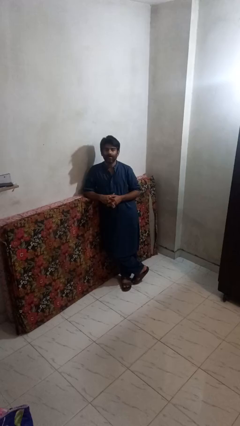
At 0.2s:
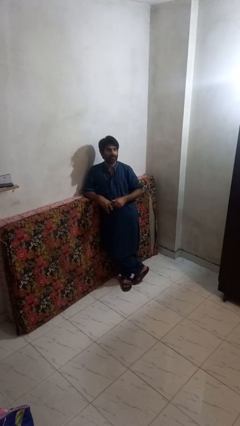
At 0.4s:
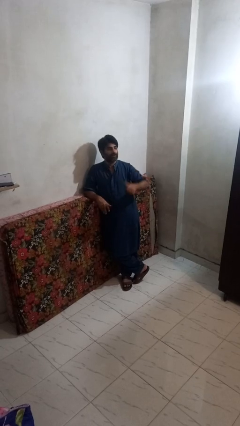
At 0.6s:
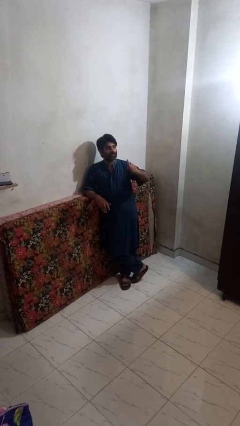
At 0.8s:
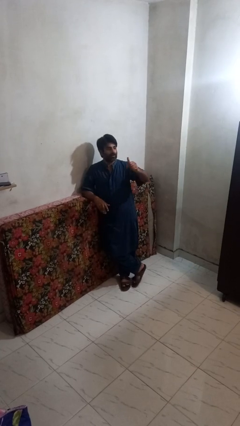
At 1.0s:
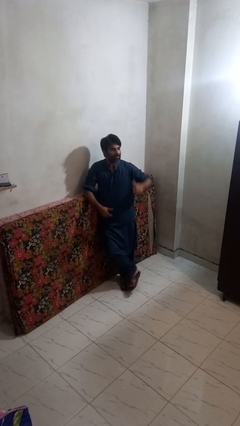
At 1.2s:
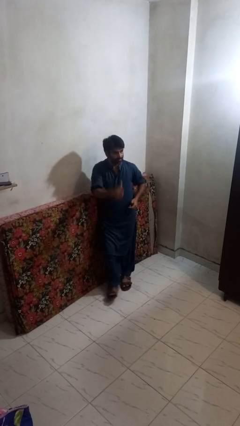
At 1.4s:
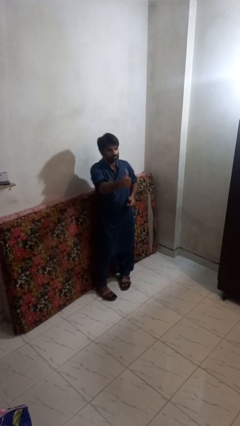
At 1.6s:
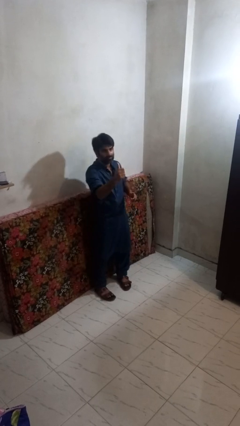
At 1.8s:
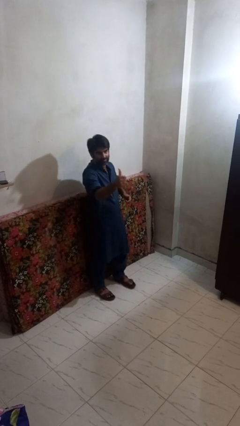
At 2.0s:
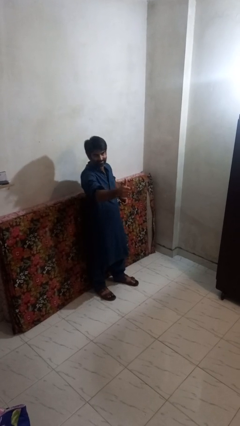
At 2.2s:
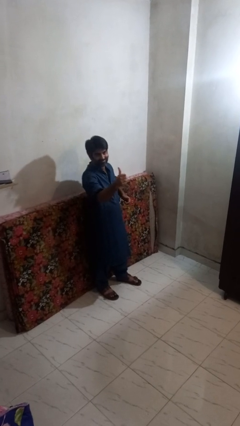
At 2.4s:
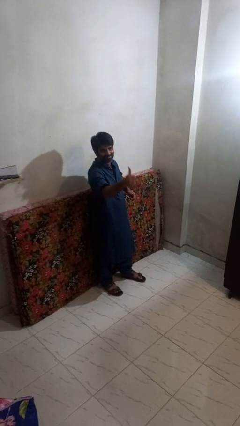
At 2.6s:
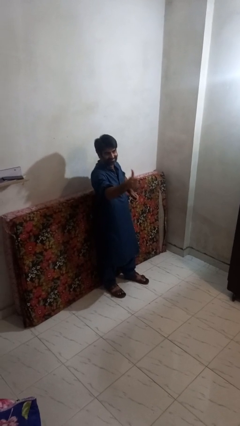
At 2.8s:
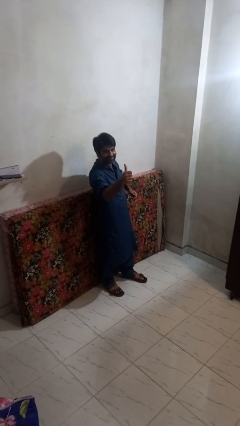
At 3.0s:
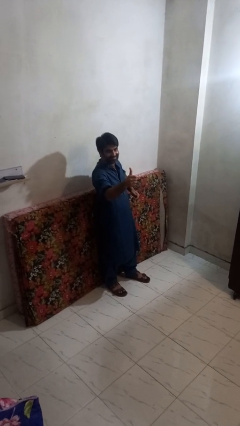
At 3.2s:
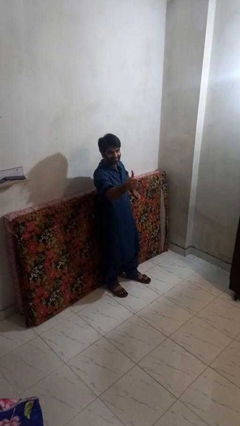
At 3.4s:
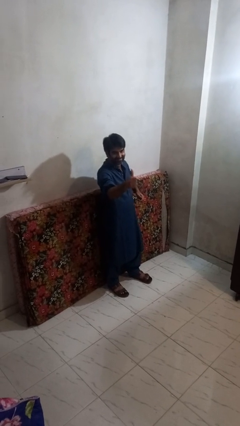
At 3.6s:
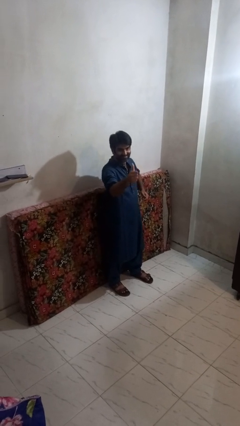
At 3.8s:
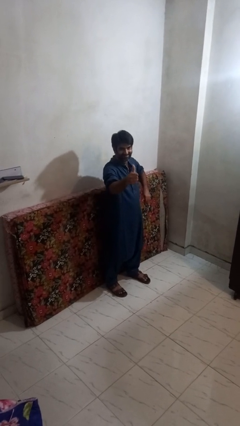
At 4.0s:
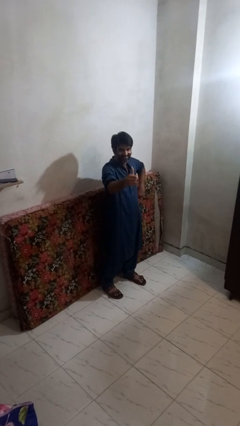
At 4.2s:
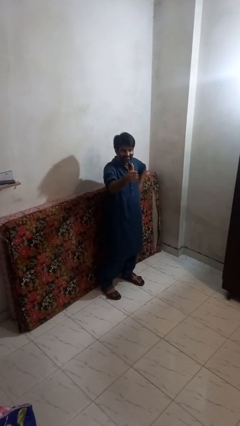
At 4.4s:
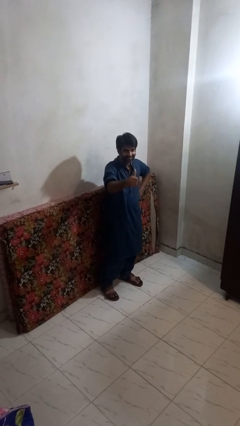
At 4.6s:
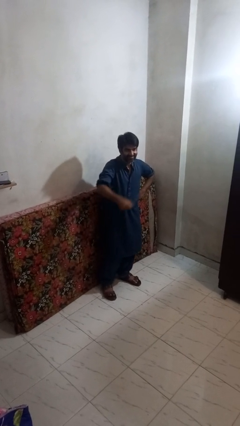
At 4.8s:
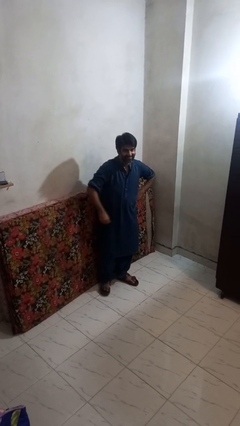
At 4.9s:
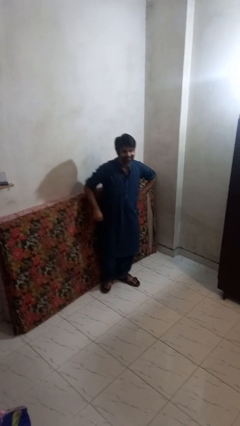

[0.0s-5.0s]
person gestures thumbs up

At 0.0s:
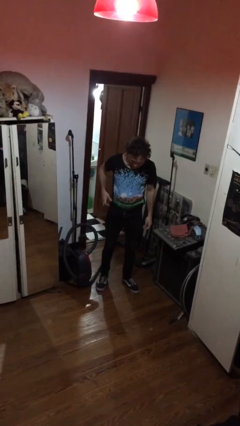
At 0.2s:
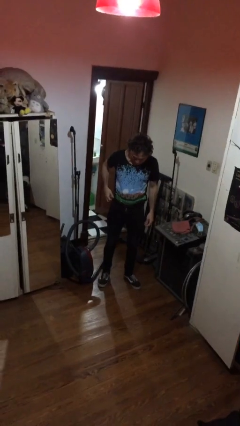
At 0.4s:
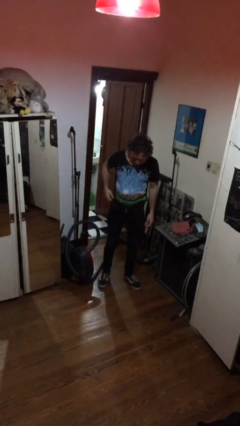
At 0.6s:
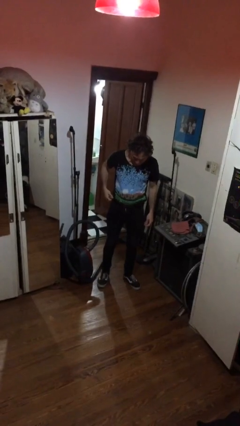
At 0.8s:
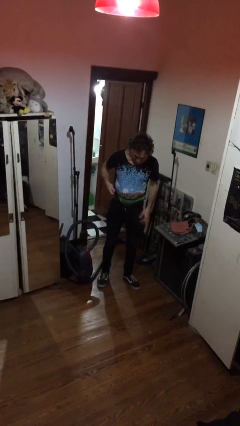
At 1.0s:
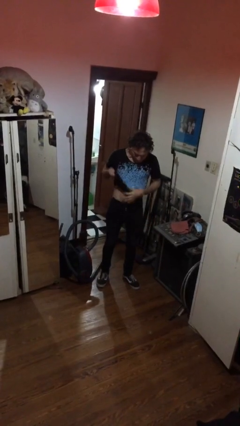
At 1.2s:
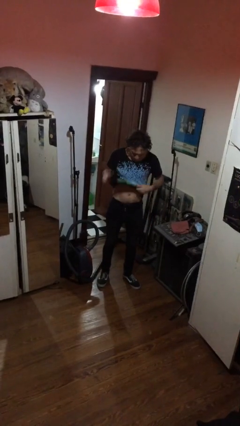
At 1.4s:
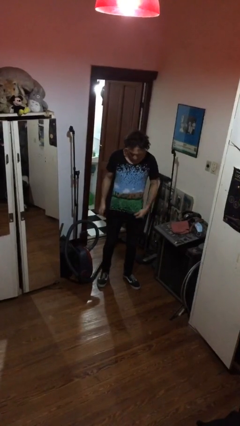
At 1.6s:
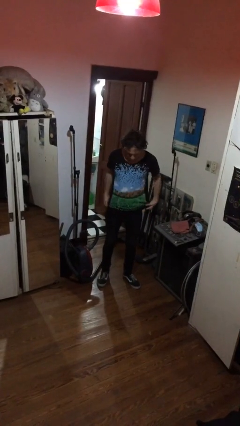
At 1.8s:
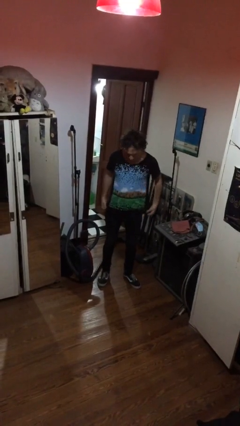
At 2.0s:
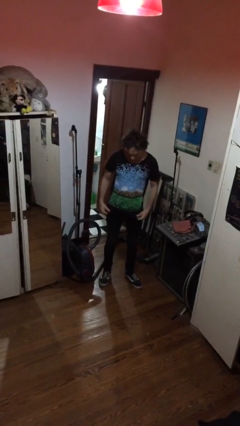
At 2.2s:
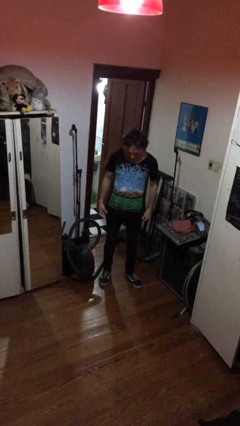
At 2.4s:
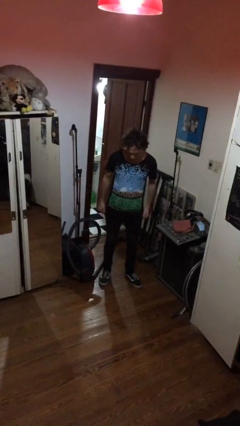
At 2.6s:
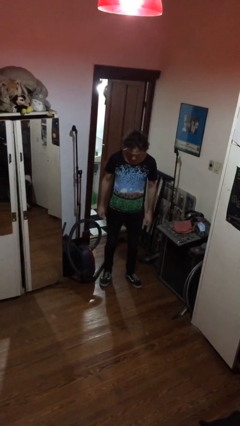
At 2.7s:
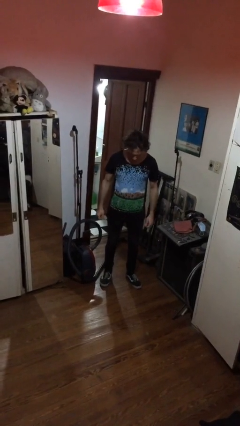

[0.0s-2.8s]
person untucks shirt

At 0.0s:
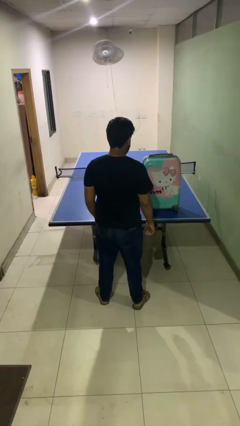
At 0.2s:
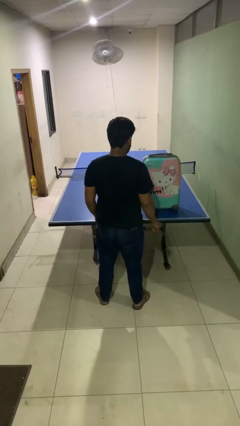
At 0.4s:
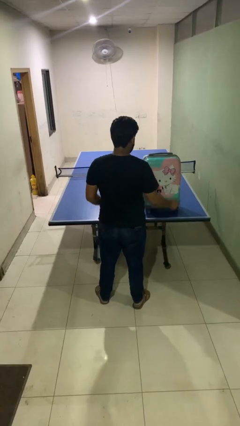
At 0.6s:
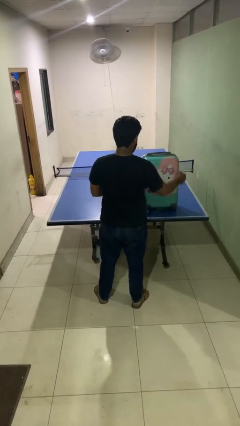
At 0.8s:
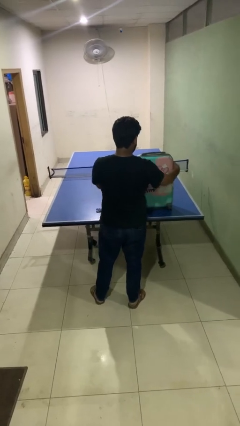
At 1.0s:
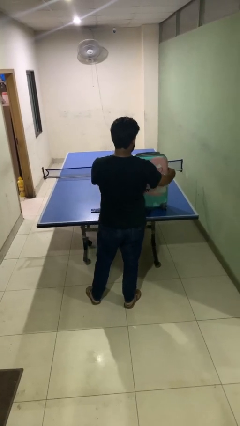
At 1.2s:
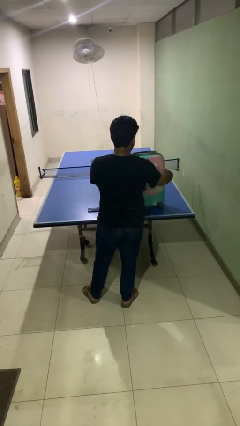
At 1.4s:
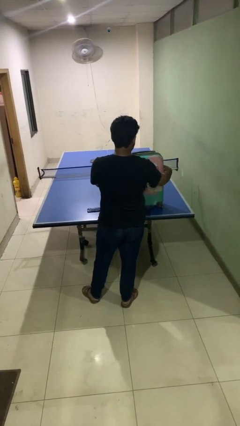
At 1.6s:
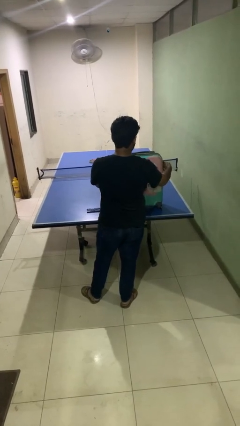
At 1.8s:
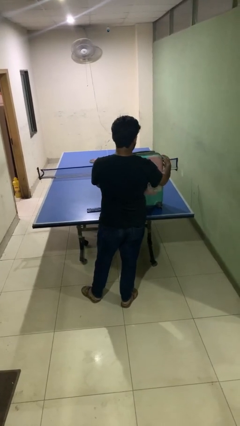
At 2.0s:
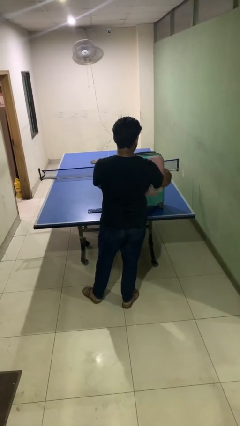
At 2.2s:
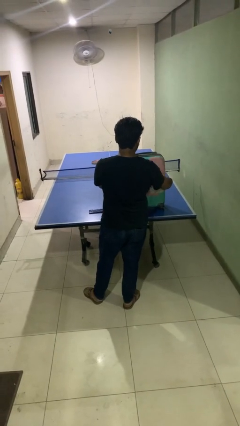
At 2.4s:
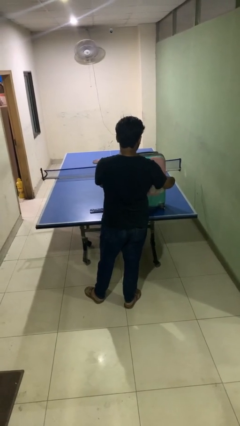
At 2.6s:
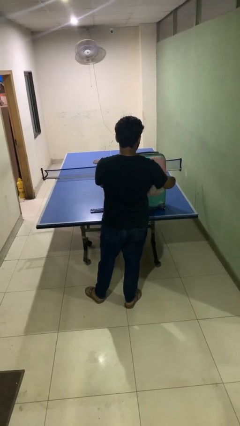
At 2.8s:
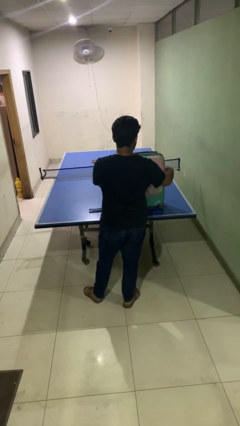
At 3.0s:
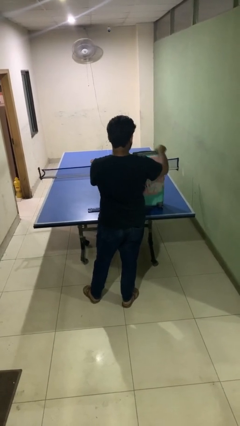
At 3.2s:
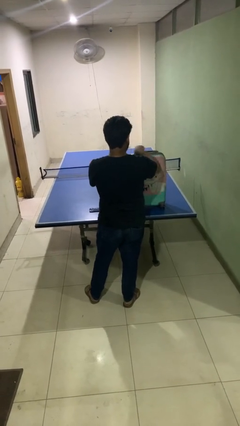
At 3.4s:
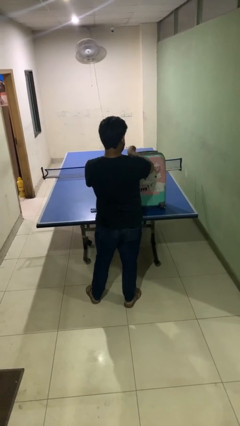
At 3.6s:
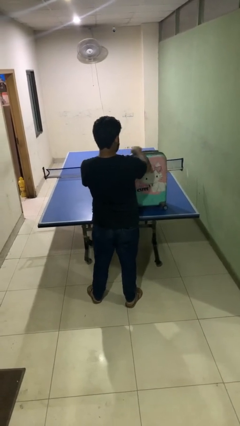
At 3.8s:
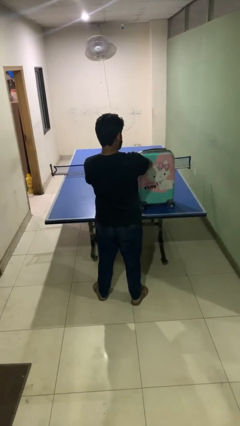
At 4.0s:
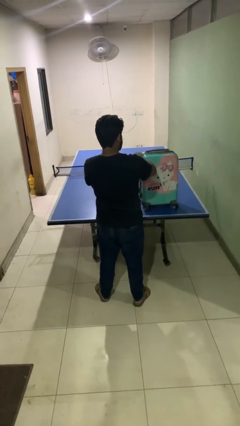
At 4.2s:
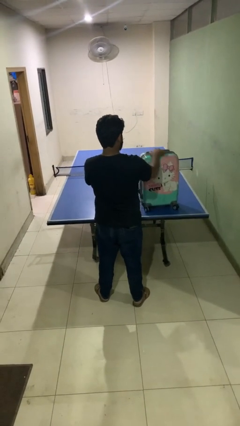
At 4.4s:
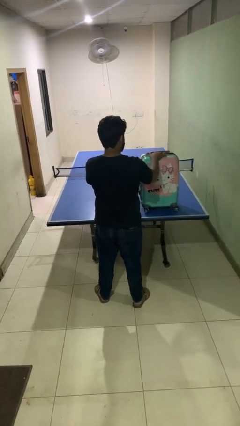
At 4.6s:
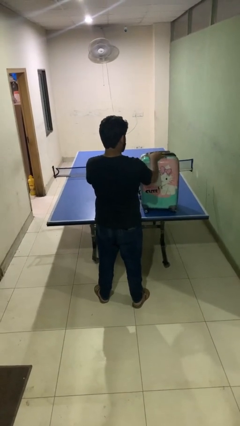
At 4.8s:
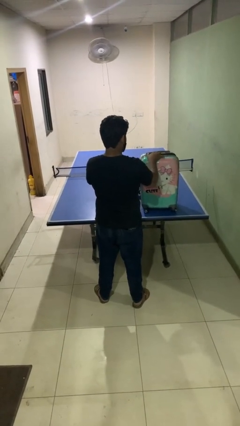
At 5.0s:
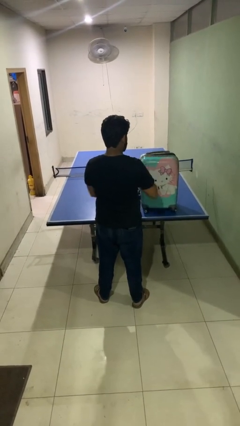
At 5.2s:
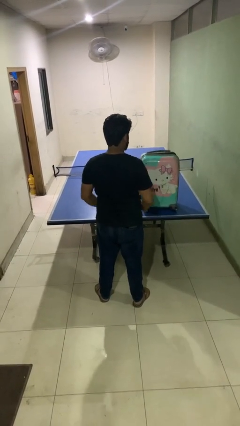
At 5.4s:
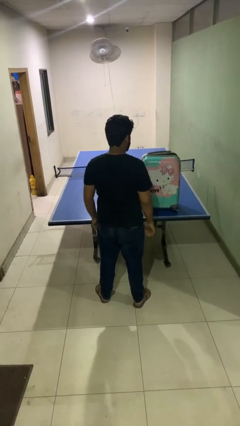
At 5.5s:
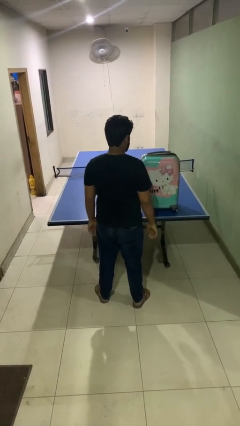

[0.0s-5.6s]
person opens suitcase

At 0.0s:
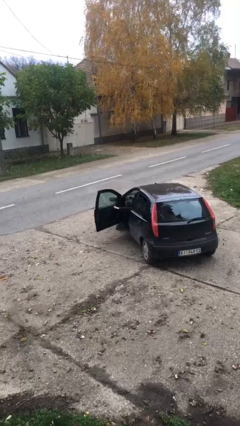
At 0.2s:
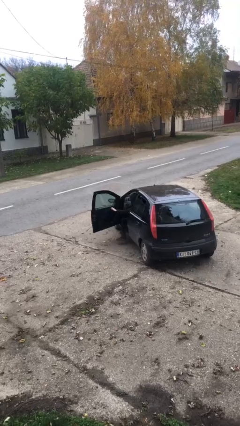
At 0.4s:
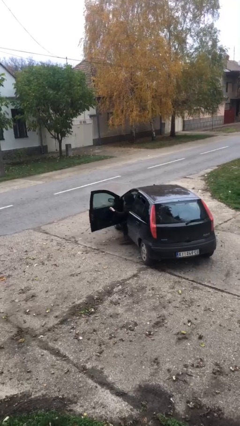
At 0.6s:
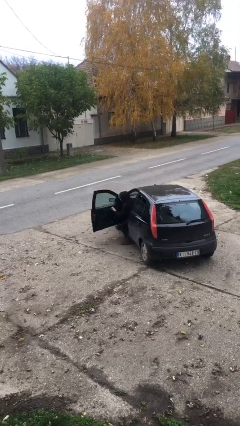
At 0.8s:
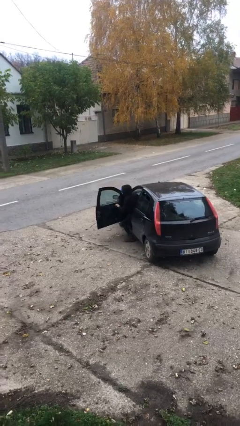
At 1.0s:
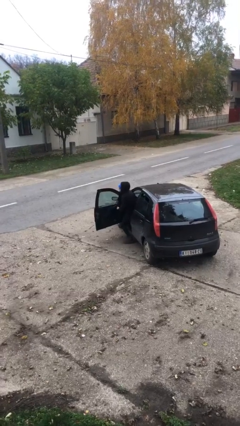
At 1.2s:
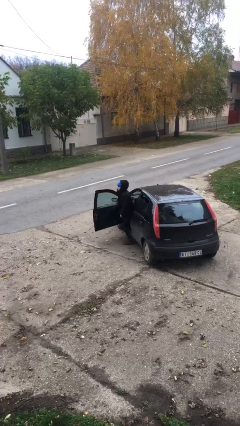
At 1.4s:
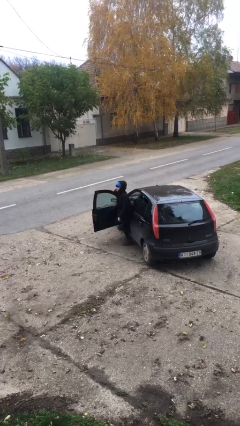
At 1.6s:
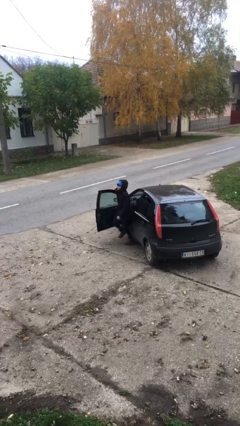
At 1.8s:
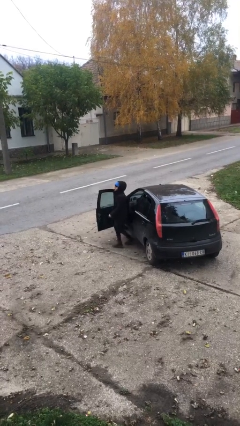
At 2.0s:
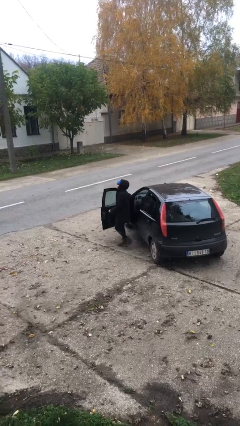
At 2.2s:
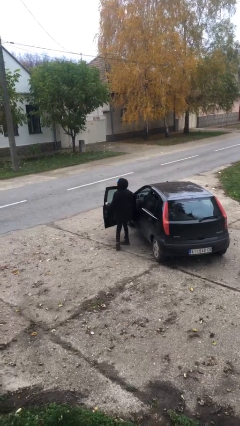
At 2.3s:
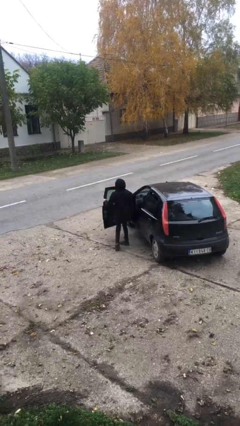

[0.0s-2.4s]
person exits car

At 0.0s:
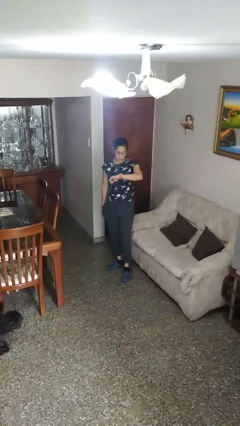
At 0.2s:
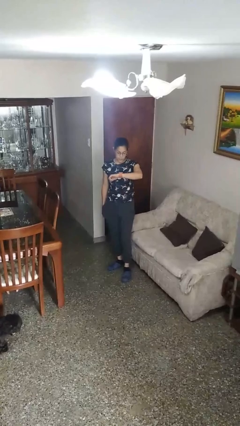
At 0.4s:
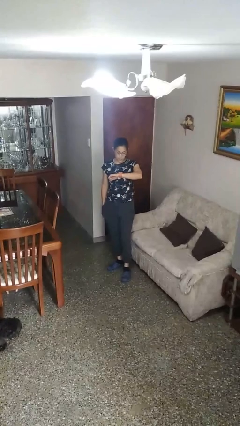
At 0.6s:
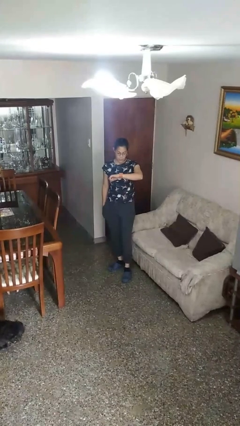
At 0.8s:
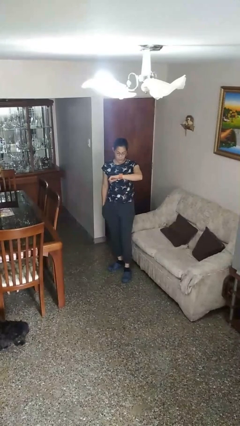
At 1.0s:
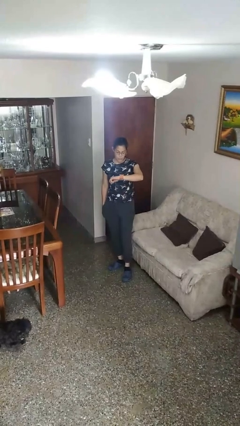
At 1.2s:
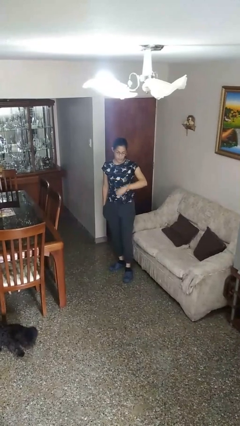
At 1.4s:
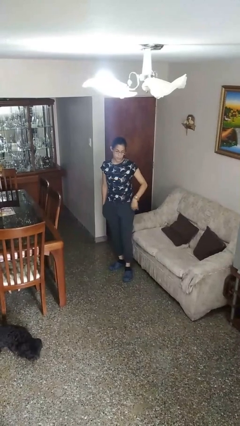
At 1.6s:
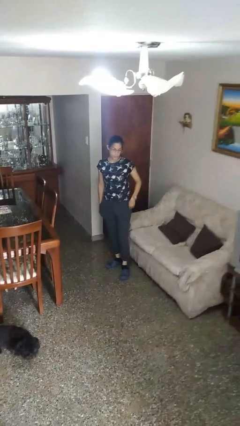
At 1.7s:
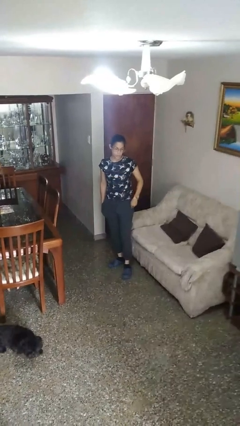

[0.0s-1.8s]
person looks at wristwatch

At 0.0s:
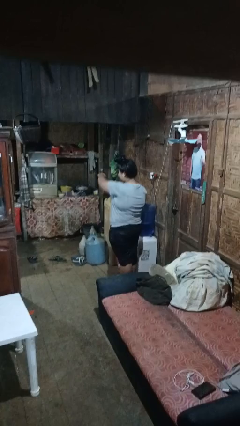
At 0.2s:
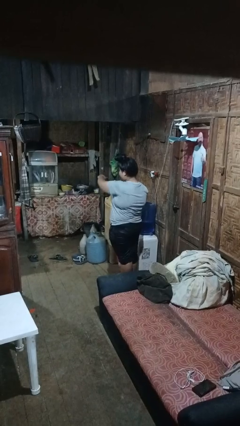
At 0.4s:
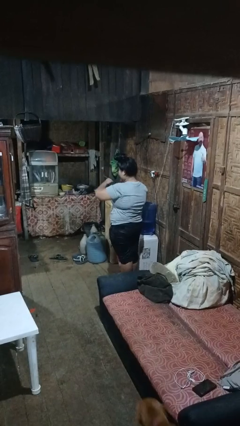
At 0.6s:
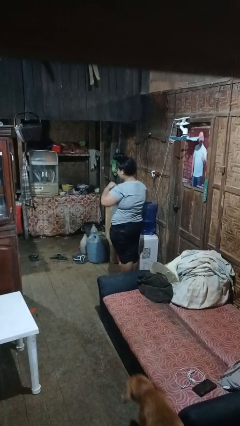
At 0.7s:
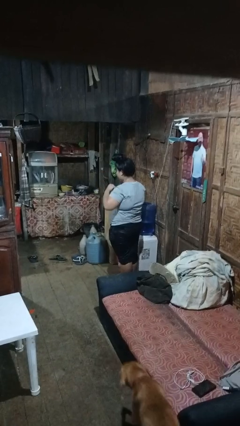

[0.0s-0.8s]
person punches
